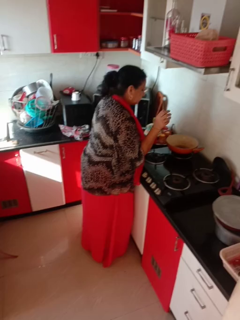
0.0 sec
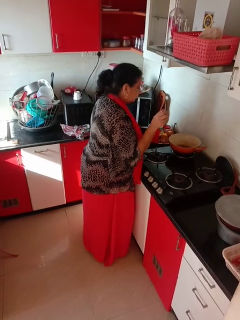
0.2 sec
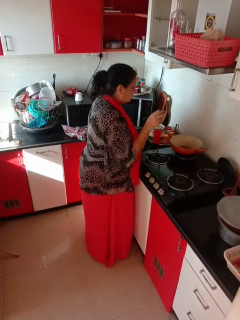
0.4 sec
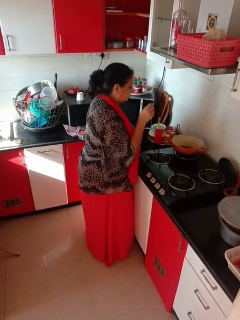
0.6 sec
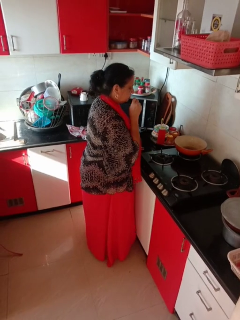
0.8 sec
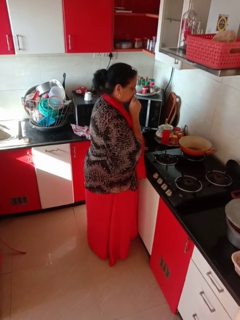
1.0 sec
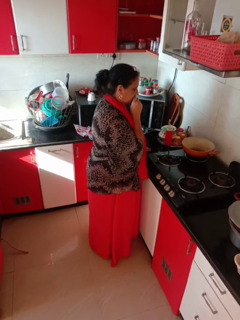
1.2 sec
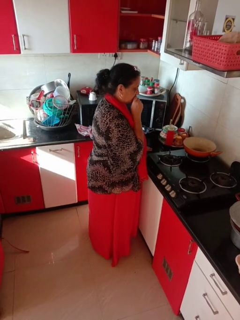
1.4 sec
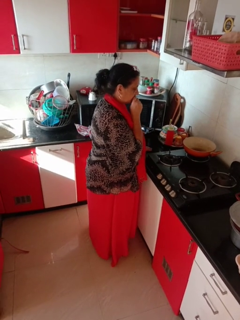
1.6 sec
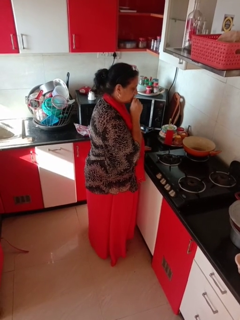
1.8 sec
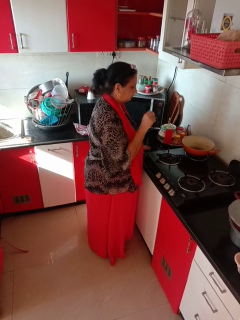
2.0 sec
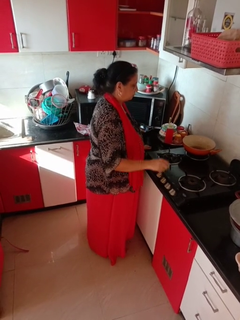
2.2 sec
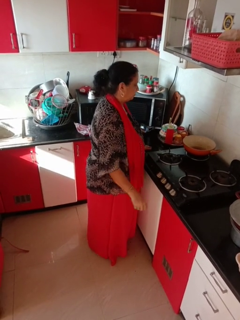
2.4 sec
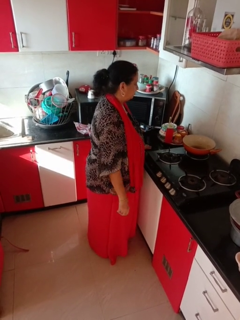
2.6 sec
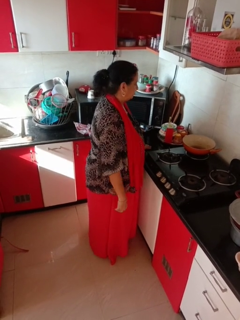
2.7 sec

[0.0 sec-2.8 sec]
person burns hand

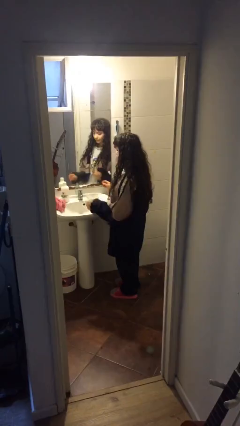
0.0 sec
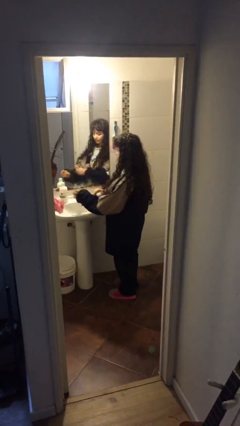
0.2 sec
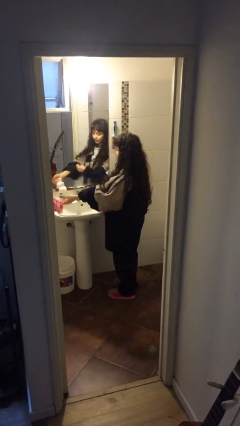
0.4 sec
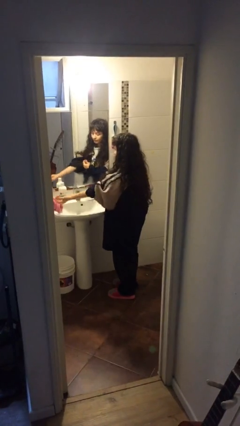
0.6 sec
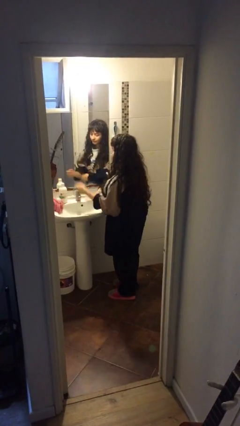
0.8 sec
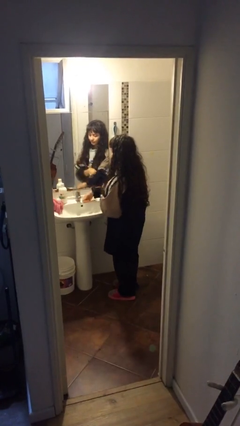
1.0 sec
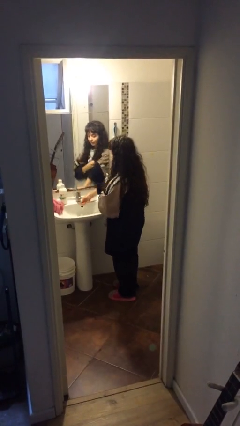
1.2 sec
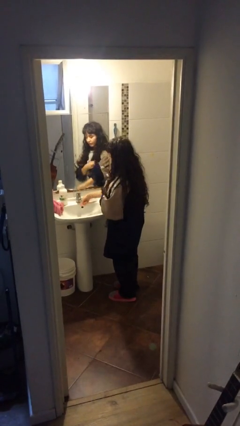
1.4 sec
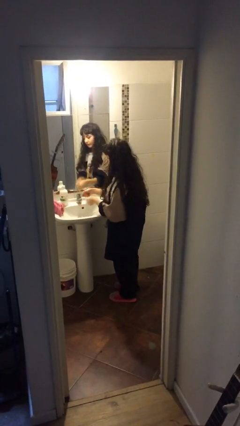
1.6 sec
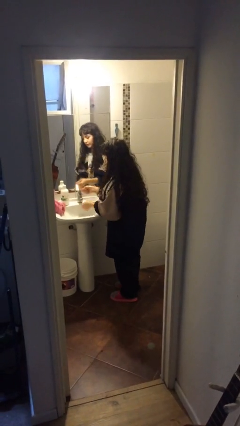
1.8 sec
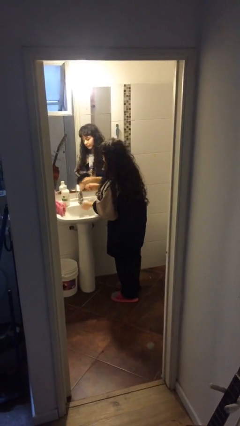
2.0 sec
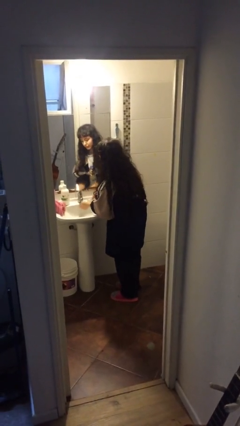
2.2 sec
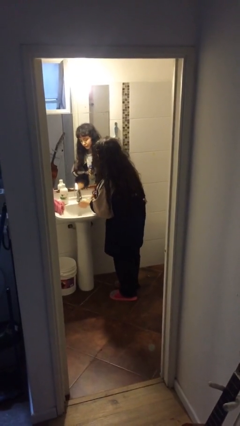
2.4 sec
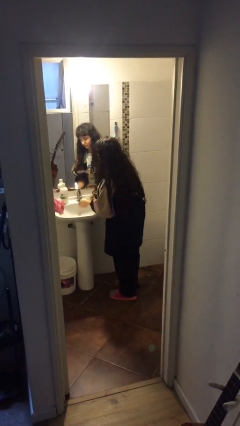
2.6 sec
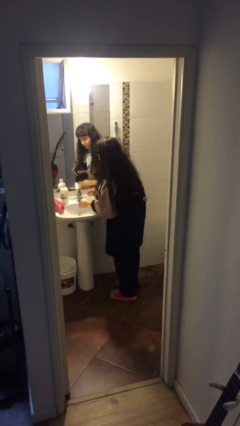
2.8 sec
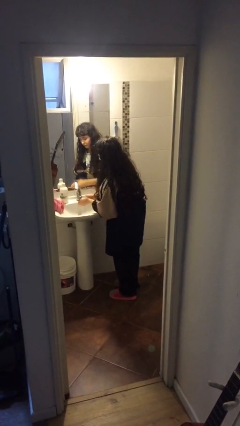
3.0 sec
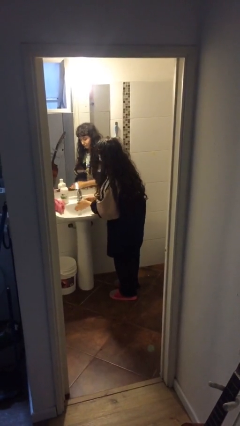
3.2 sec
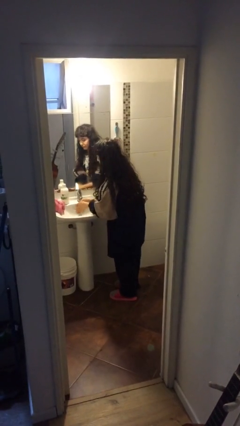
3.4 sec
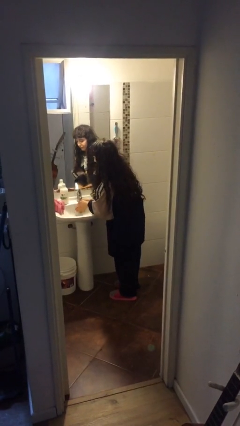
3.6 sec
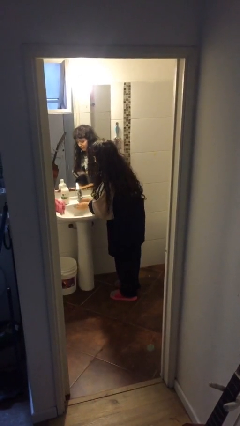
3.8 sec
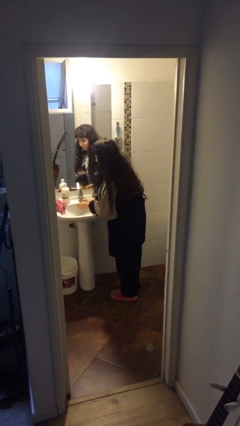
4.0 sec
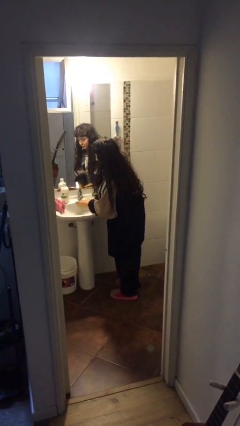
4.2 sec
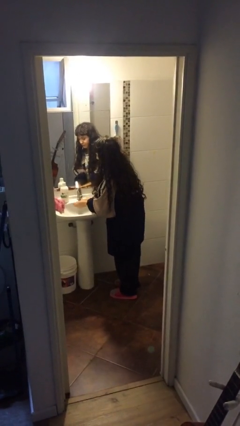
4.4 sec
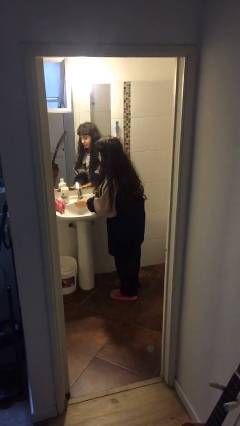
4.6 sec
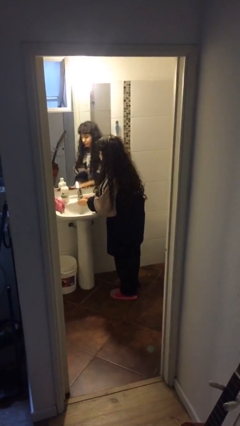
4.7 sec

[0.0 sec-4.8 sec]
person washes hands

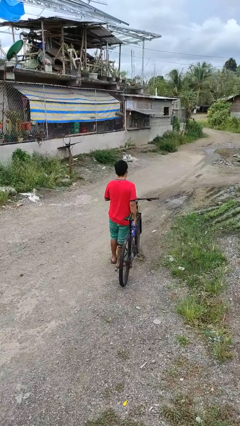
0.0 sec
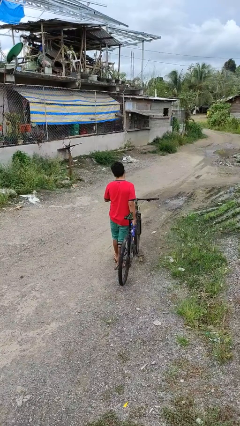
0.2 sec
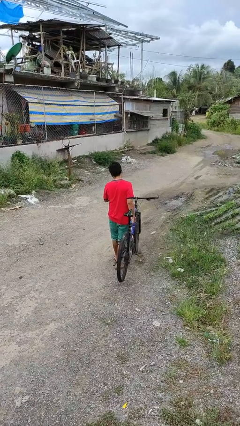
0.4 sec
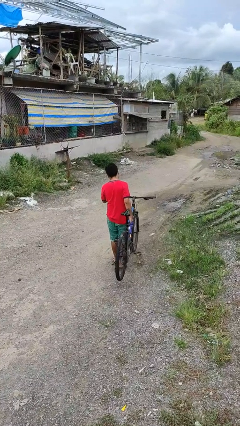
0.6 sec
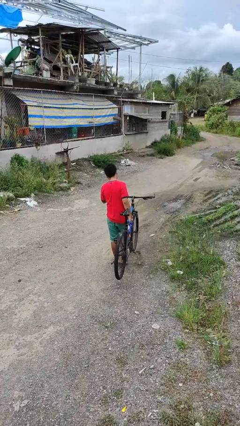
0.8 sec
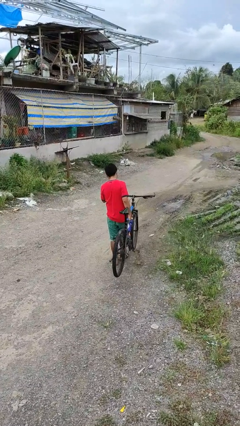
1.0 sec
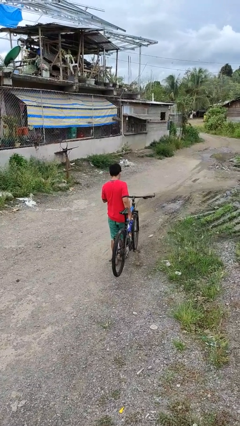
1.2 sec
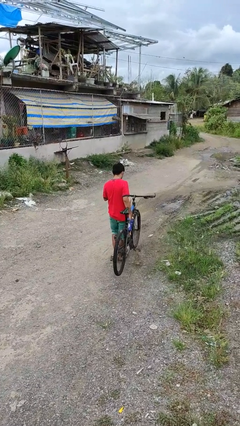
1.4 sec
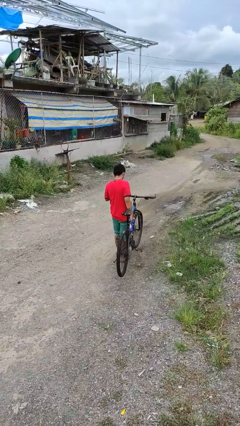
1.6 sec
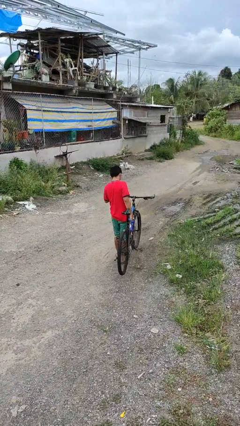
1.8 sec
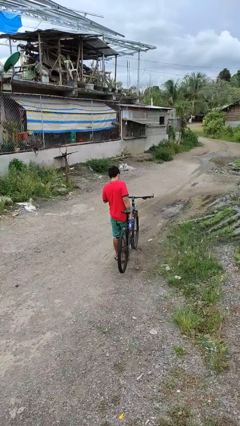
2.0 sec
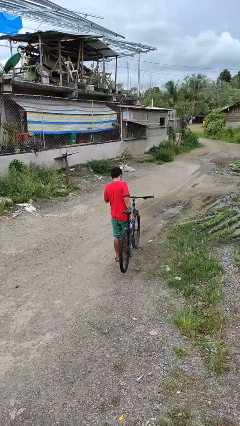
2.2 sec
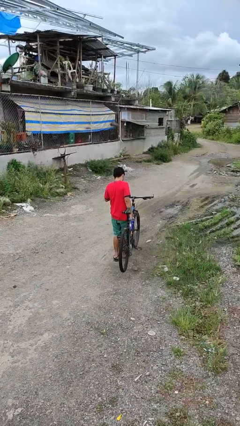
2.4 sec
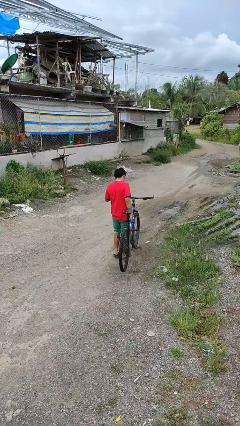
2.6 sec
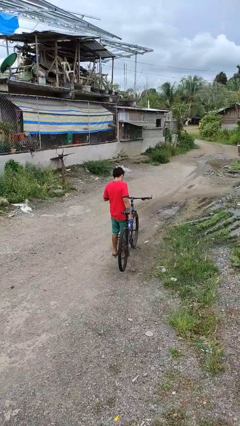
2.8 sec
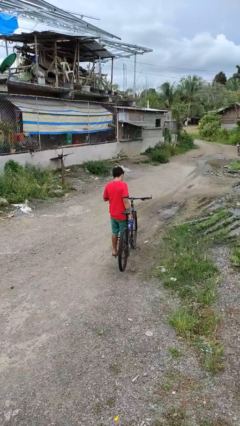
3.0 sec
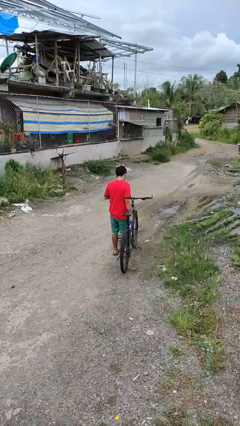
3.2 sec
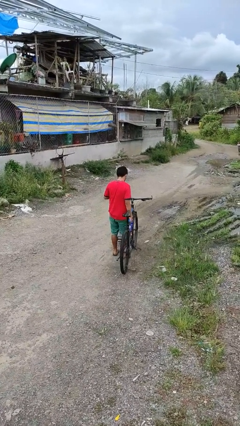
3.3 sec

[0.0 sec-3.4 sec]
person carries bicycle

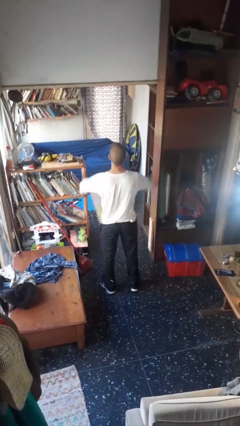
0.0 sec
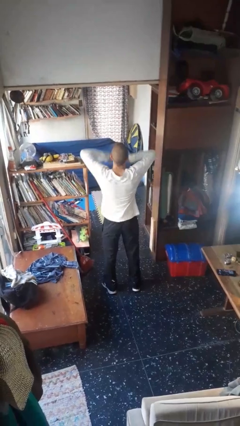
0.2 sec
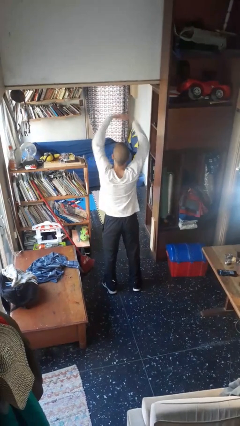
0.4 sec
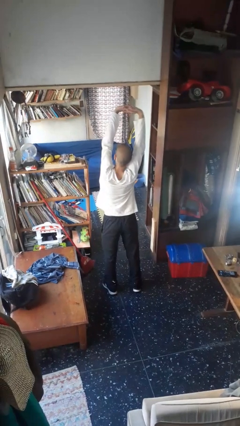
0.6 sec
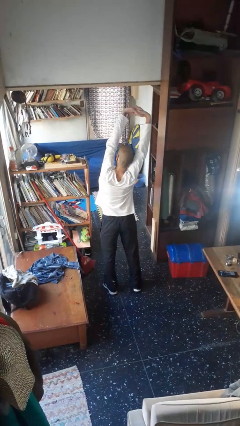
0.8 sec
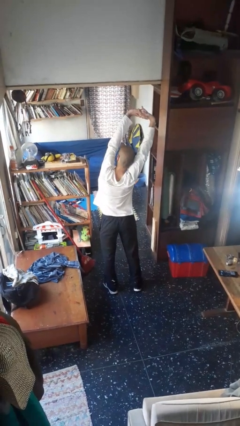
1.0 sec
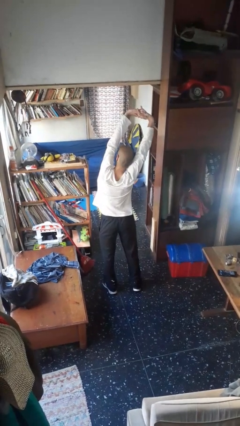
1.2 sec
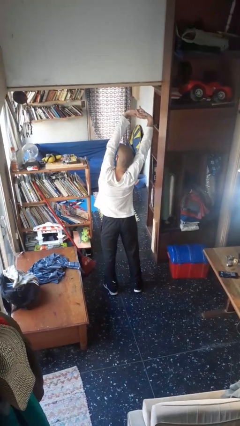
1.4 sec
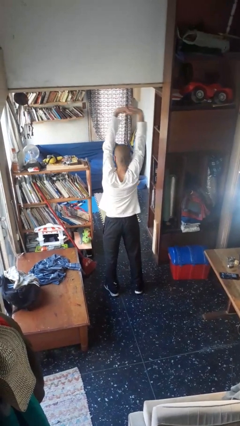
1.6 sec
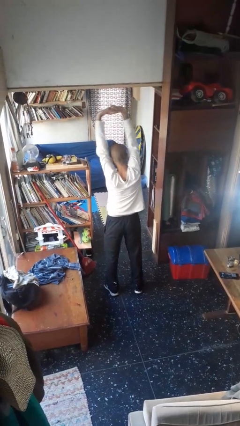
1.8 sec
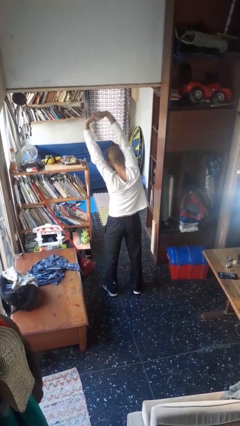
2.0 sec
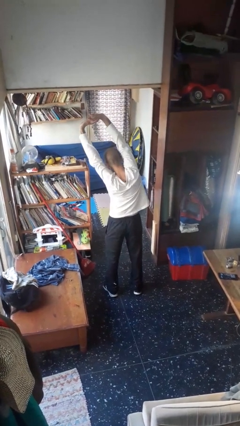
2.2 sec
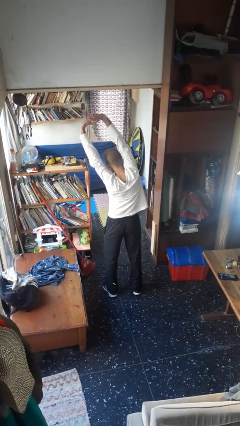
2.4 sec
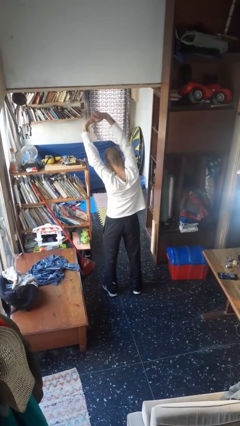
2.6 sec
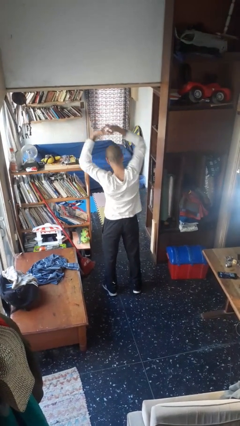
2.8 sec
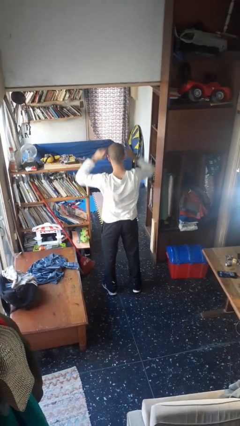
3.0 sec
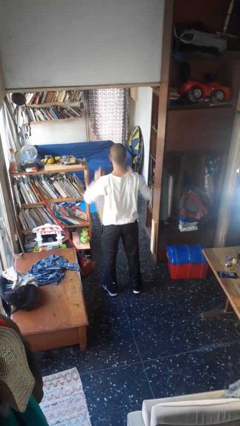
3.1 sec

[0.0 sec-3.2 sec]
person stretches arms over head

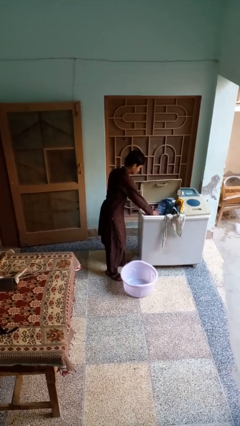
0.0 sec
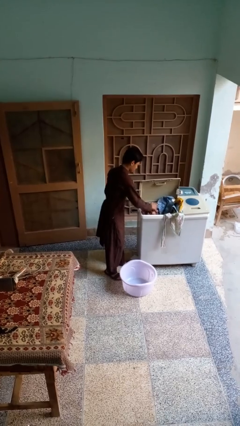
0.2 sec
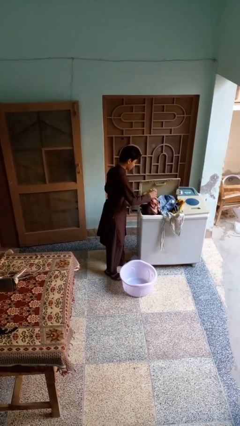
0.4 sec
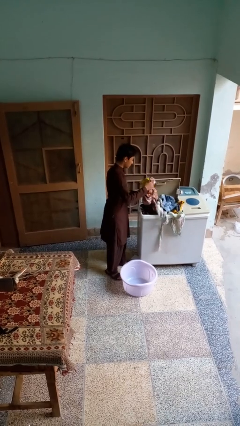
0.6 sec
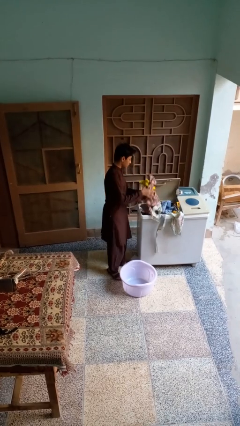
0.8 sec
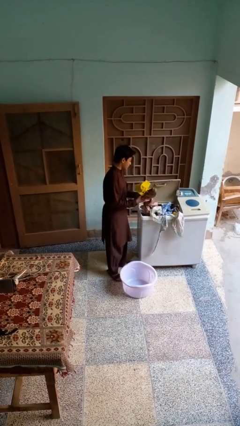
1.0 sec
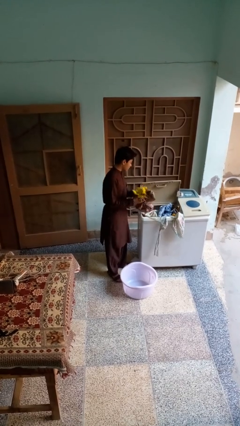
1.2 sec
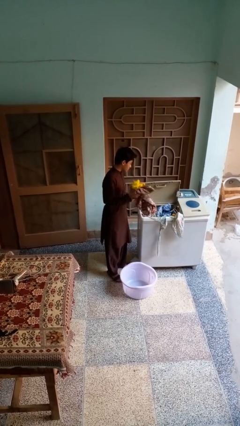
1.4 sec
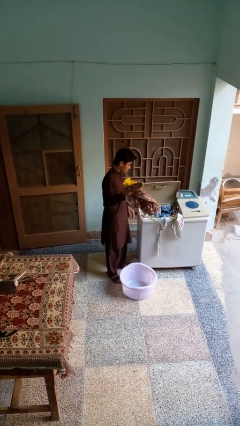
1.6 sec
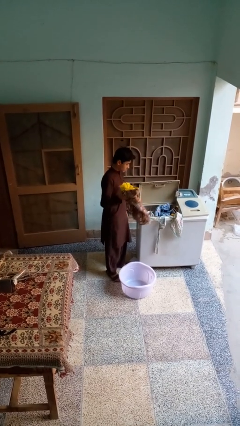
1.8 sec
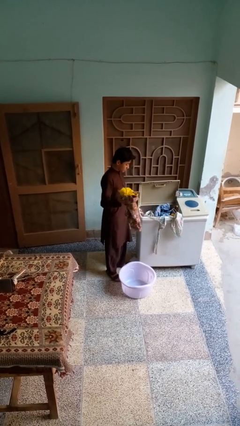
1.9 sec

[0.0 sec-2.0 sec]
person loads clotheswasher

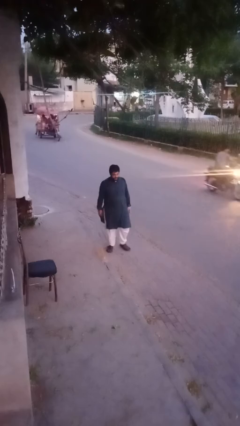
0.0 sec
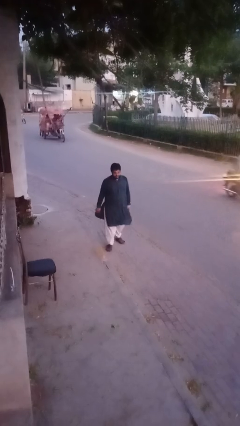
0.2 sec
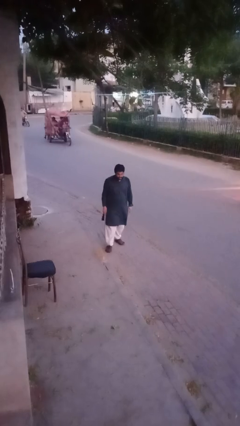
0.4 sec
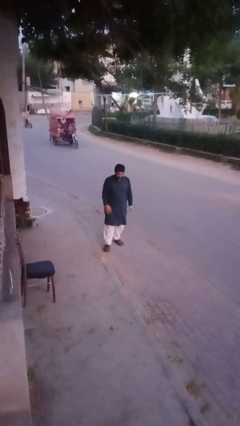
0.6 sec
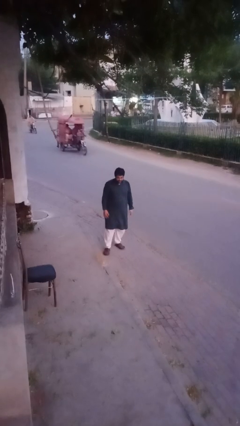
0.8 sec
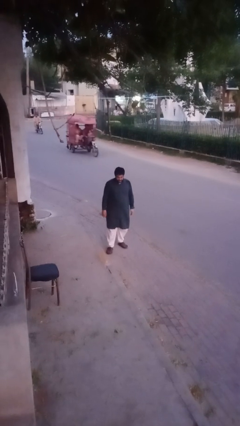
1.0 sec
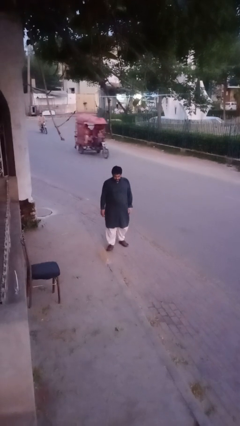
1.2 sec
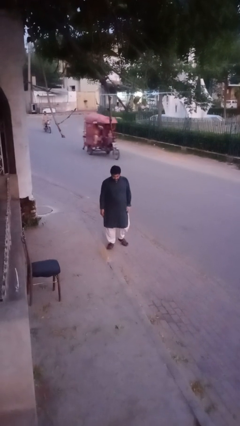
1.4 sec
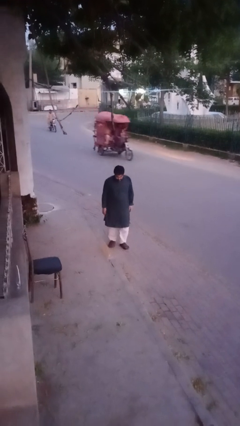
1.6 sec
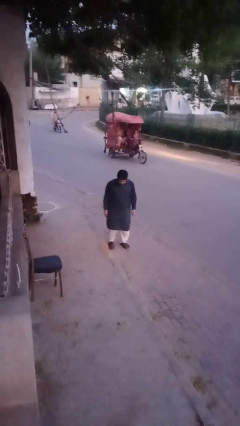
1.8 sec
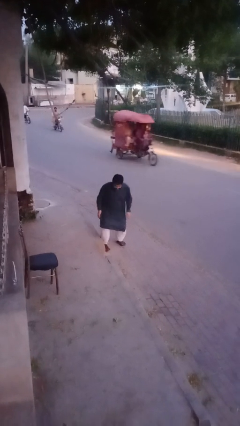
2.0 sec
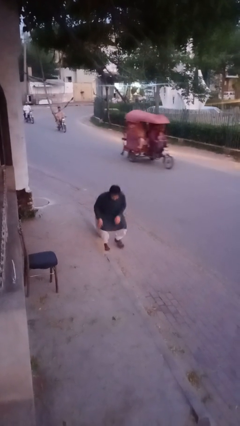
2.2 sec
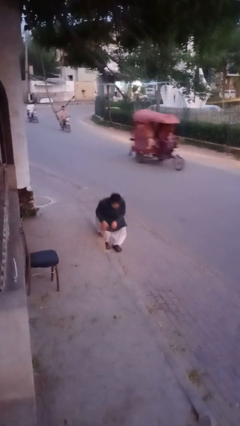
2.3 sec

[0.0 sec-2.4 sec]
person trips on object on floor
